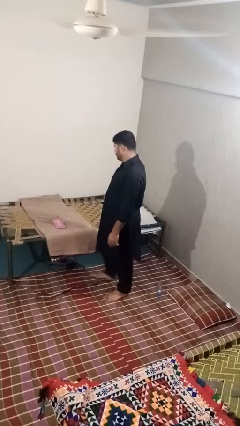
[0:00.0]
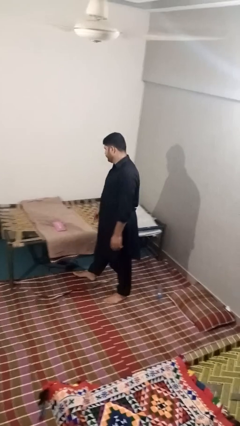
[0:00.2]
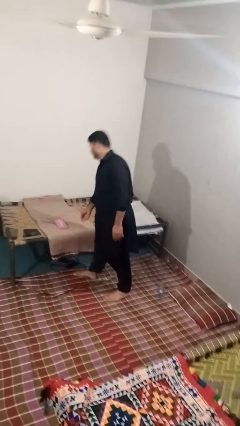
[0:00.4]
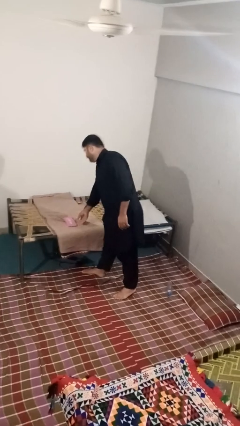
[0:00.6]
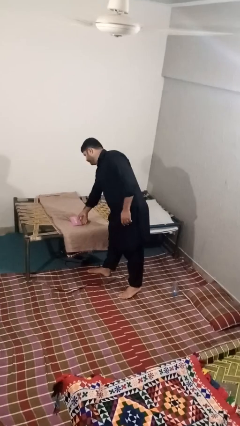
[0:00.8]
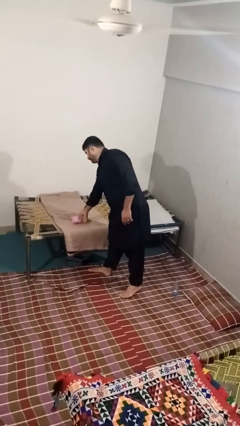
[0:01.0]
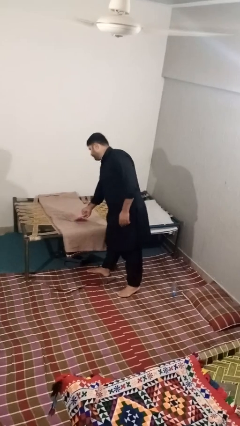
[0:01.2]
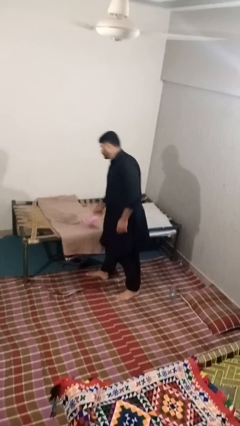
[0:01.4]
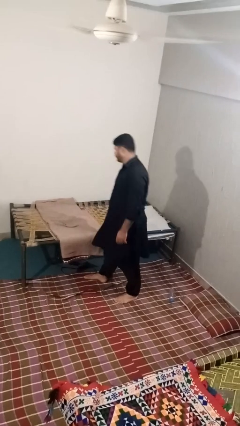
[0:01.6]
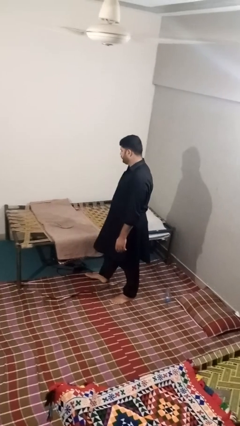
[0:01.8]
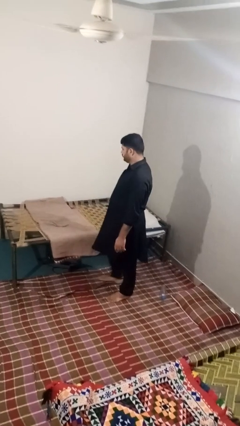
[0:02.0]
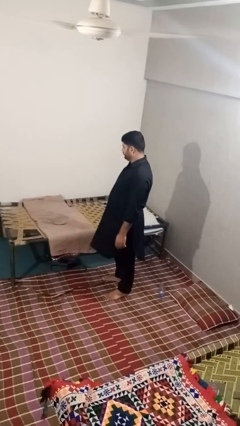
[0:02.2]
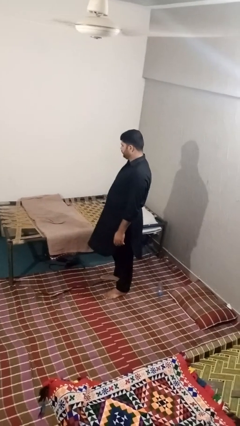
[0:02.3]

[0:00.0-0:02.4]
person picks up object from bed

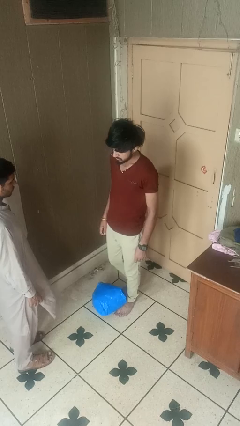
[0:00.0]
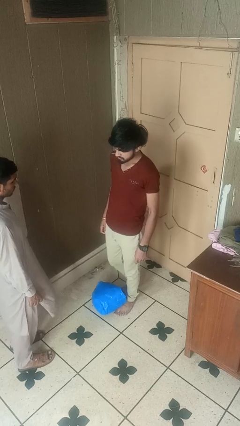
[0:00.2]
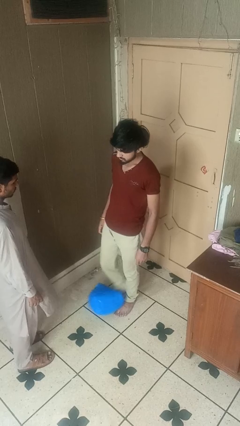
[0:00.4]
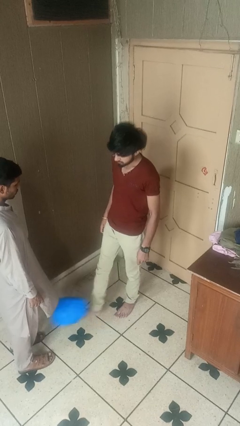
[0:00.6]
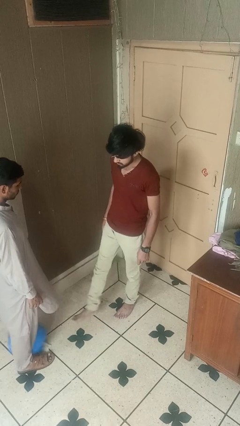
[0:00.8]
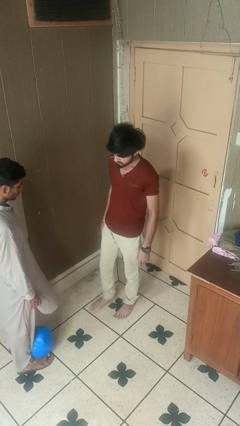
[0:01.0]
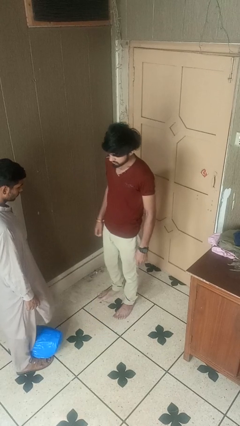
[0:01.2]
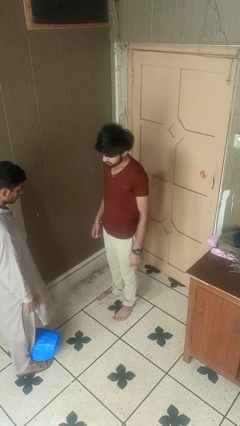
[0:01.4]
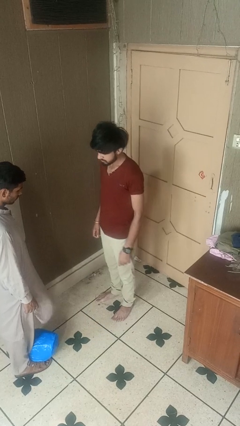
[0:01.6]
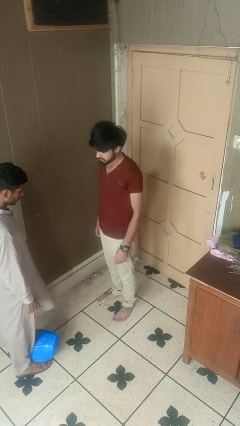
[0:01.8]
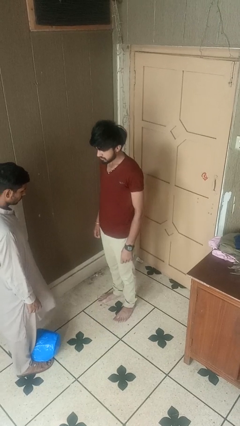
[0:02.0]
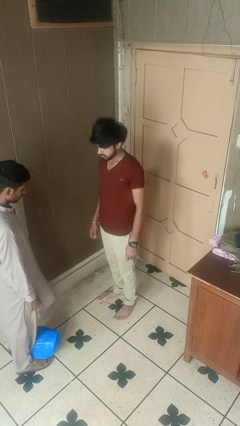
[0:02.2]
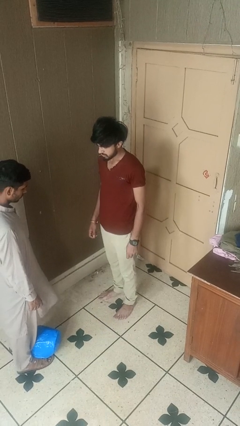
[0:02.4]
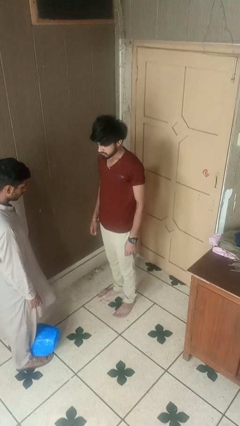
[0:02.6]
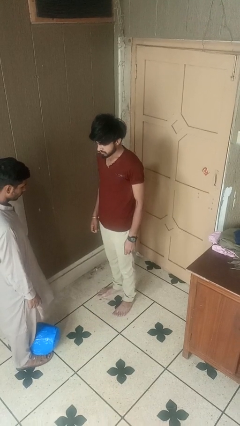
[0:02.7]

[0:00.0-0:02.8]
person kicks object to person

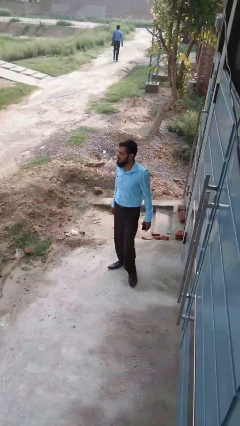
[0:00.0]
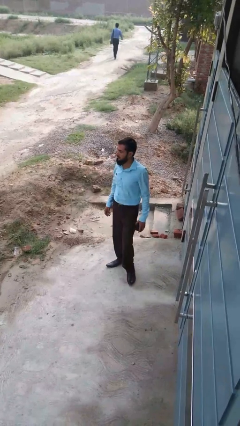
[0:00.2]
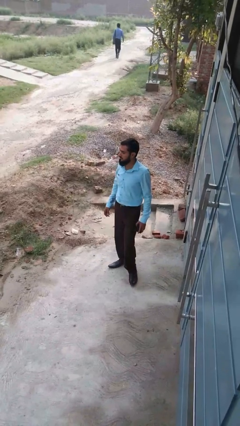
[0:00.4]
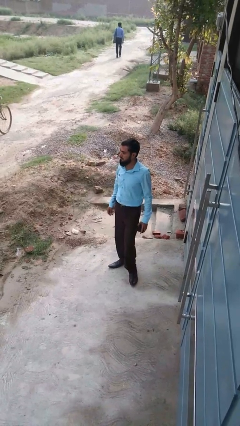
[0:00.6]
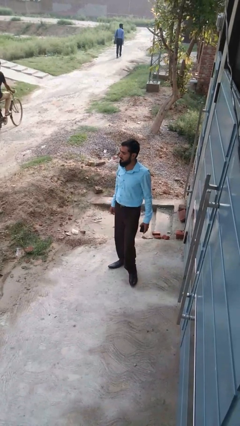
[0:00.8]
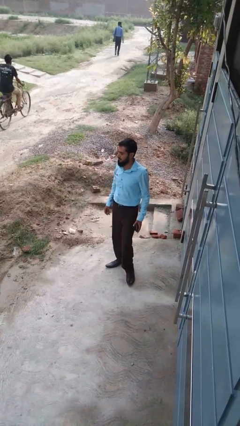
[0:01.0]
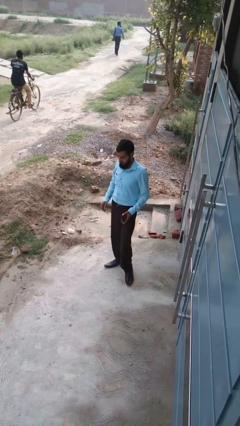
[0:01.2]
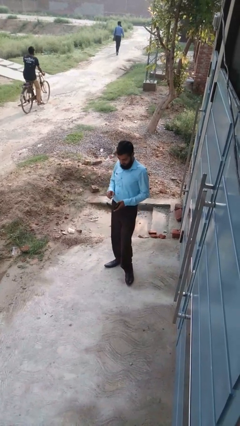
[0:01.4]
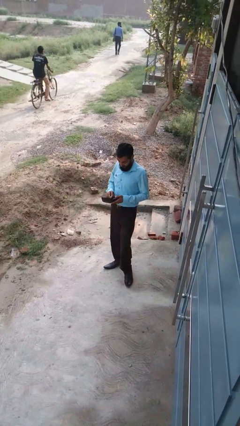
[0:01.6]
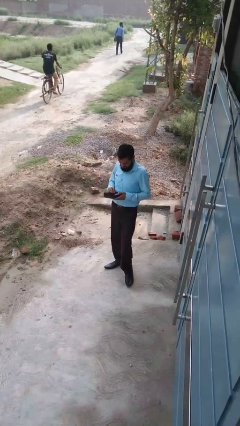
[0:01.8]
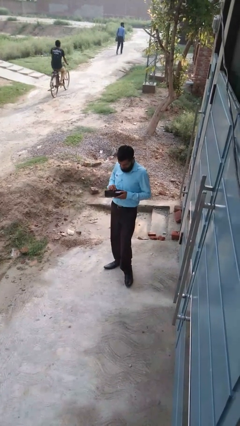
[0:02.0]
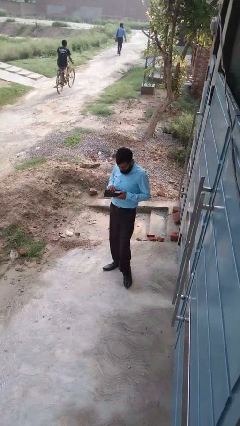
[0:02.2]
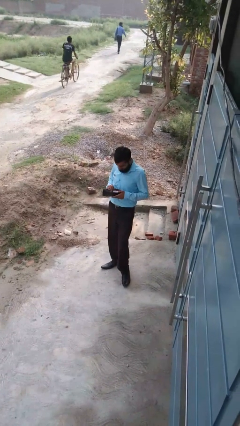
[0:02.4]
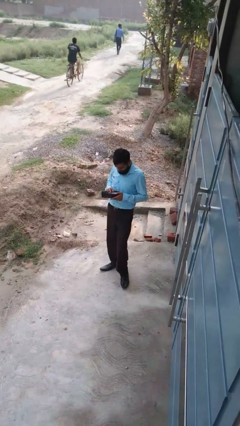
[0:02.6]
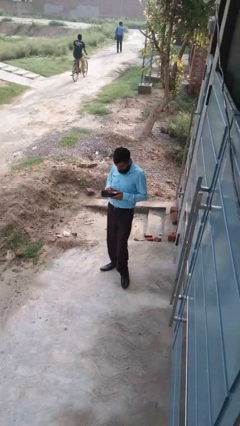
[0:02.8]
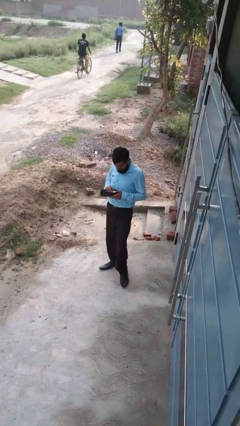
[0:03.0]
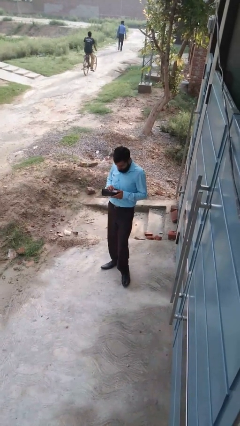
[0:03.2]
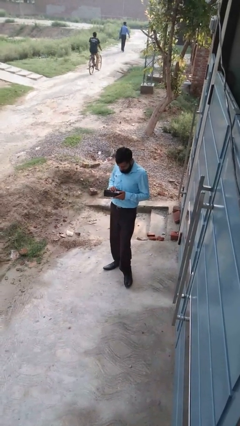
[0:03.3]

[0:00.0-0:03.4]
person searches in purse

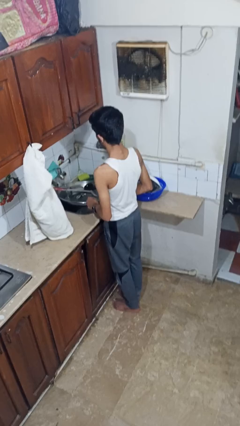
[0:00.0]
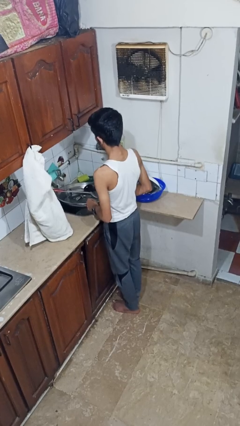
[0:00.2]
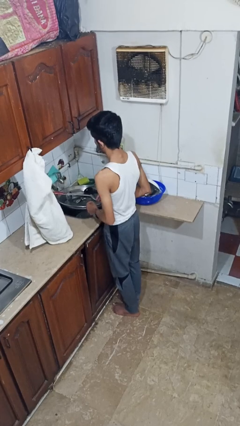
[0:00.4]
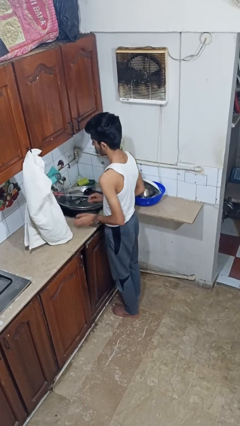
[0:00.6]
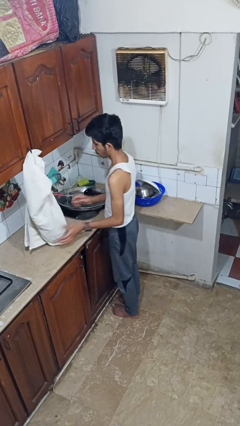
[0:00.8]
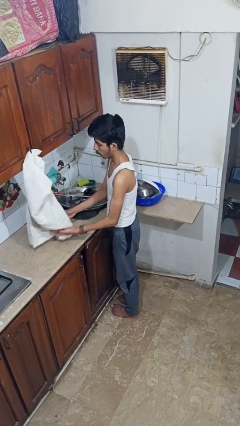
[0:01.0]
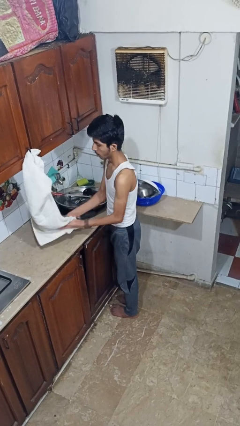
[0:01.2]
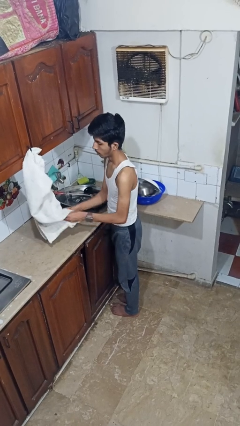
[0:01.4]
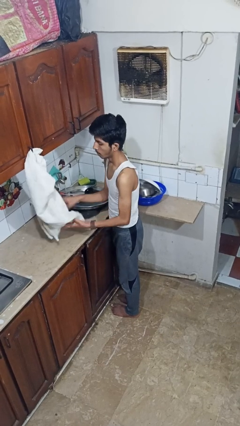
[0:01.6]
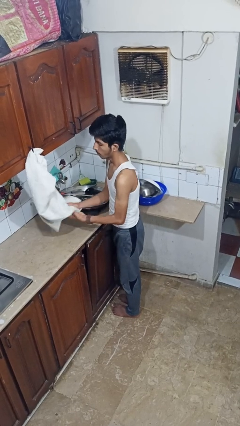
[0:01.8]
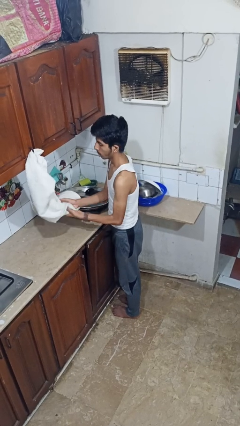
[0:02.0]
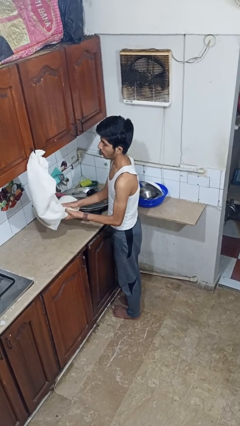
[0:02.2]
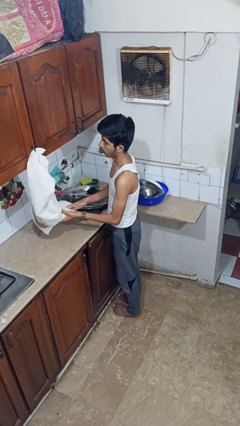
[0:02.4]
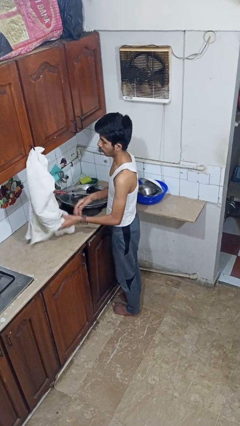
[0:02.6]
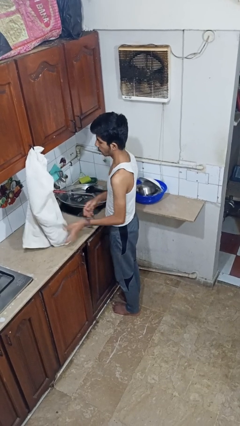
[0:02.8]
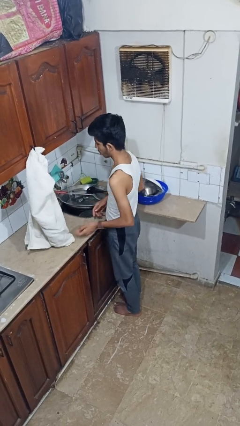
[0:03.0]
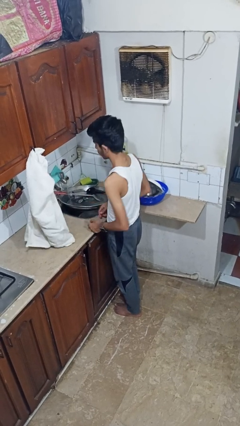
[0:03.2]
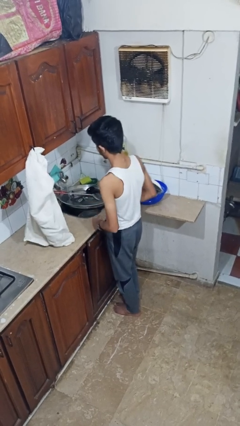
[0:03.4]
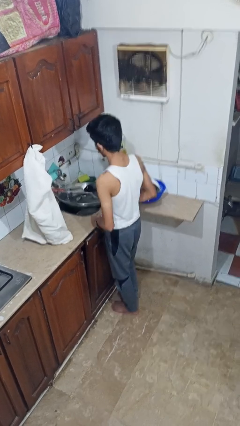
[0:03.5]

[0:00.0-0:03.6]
person dries hands with towel

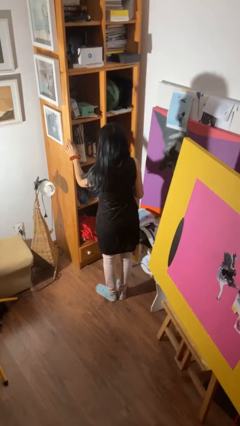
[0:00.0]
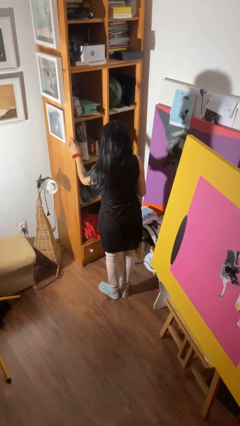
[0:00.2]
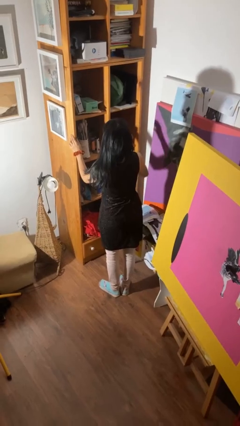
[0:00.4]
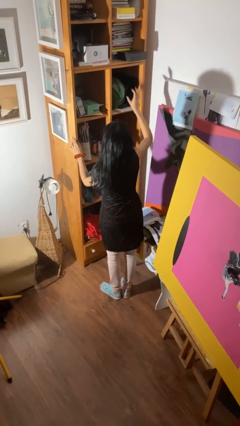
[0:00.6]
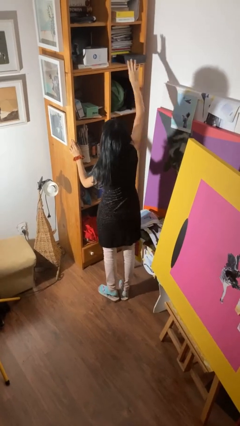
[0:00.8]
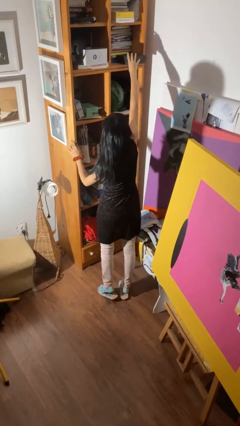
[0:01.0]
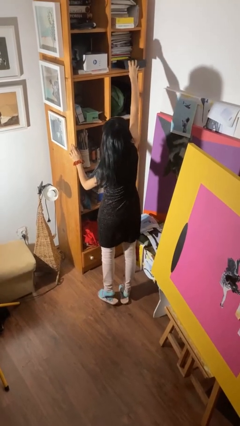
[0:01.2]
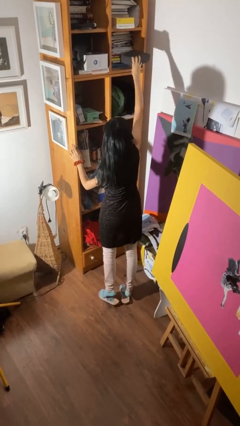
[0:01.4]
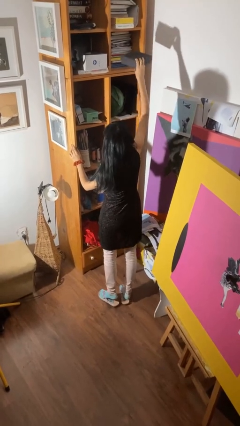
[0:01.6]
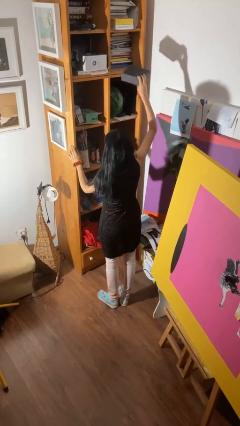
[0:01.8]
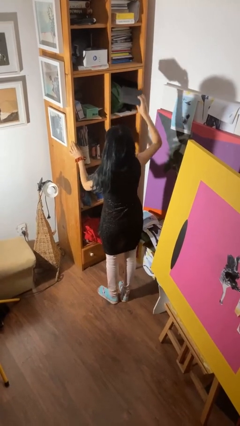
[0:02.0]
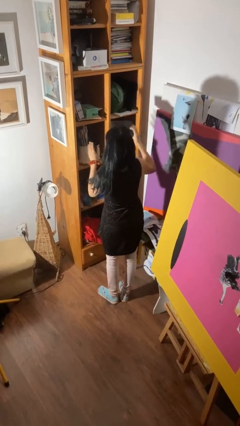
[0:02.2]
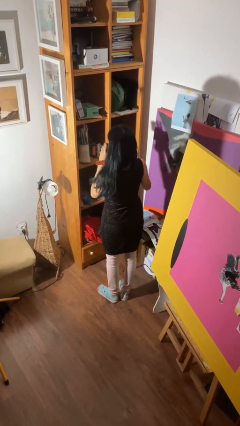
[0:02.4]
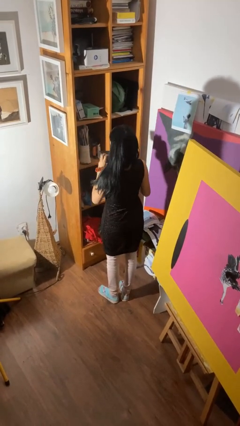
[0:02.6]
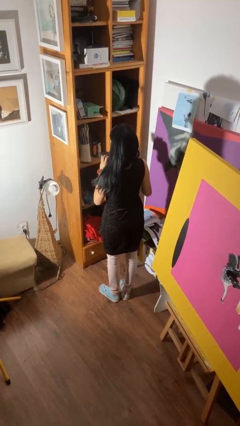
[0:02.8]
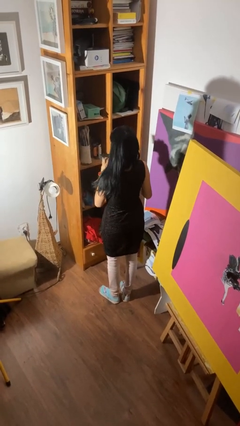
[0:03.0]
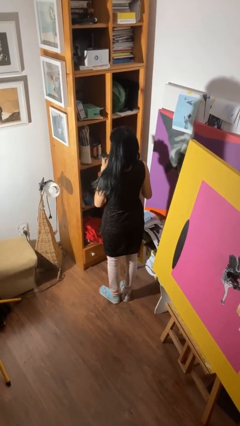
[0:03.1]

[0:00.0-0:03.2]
person picks up object from shelf

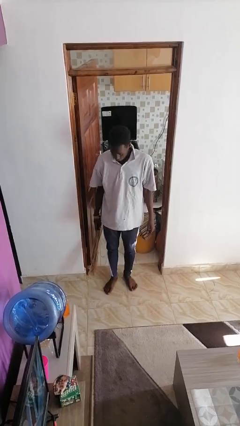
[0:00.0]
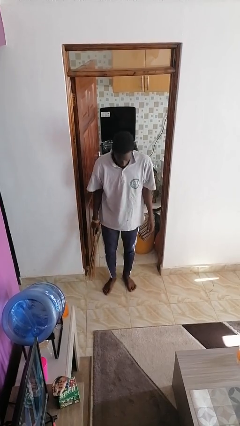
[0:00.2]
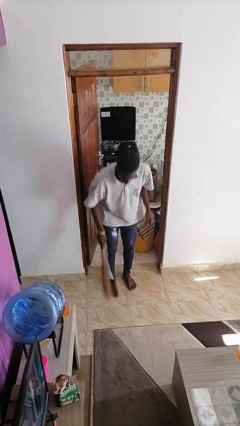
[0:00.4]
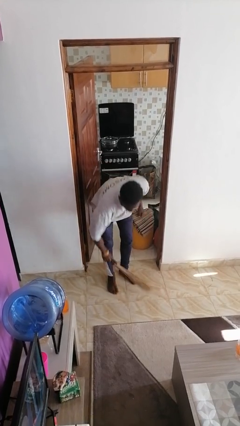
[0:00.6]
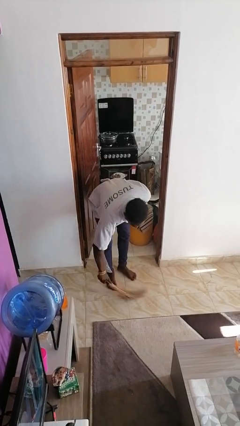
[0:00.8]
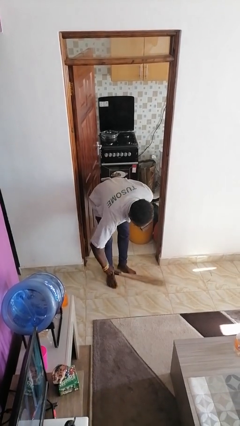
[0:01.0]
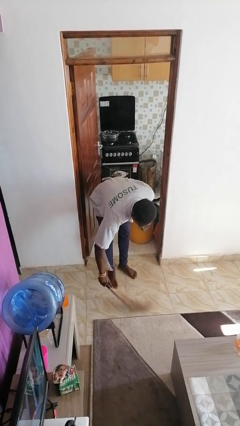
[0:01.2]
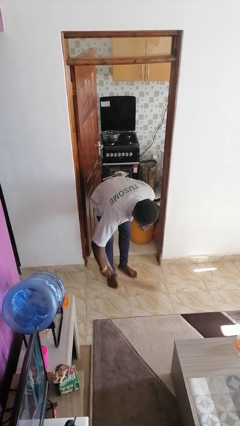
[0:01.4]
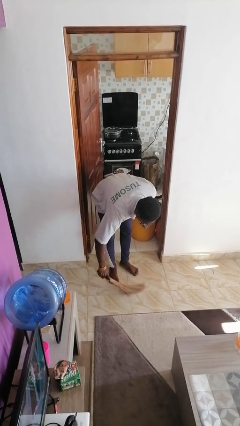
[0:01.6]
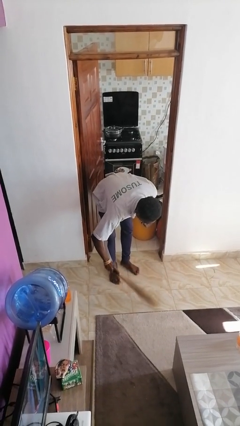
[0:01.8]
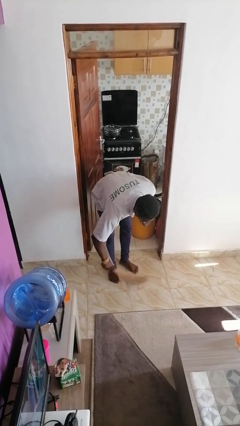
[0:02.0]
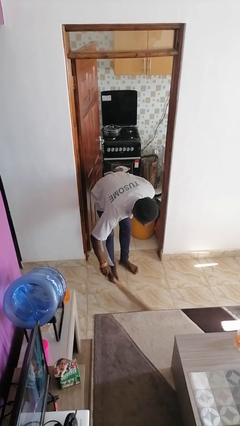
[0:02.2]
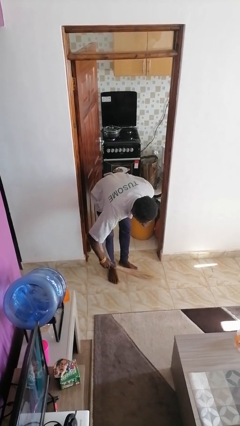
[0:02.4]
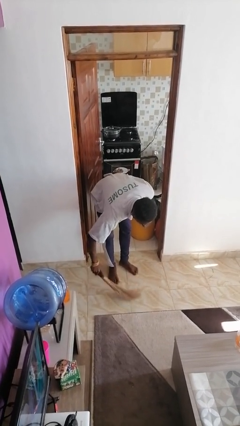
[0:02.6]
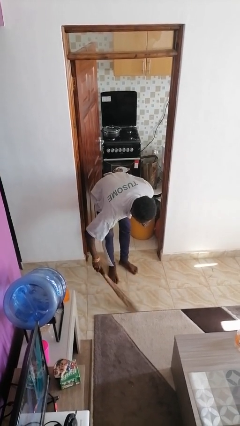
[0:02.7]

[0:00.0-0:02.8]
person sweeps floor
